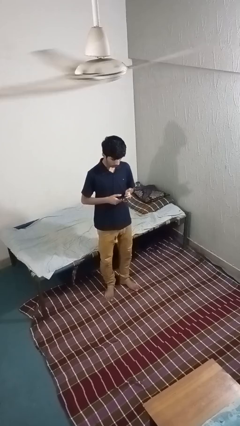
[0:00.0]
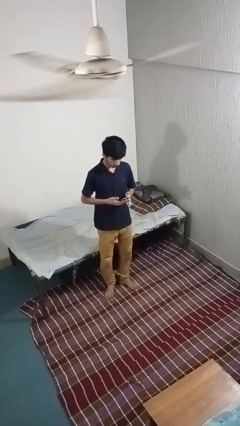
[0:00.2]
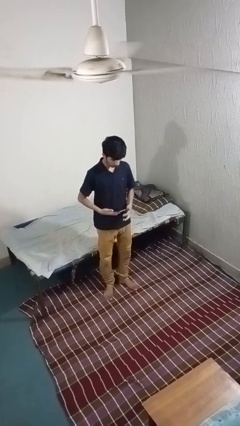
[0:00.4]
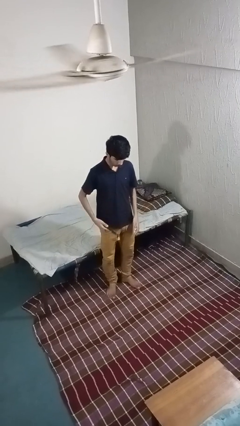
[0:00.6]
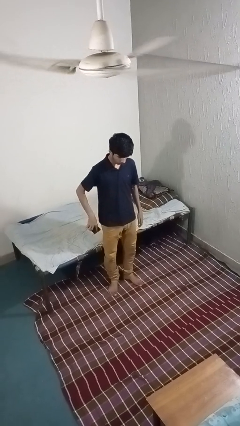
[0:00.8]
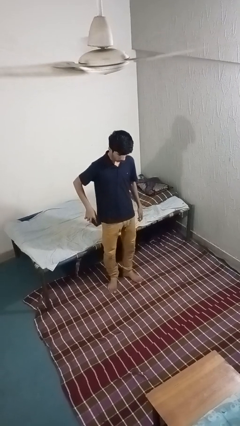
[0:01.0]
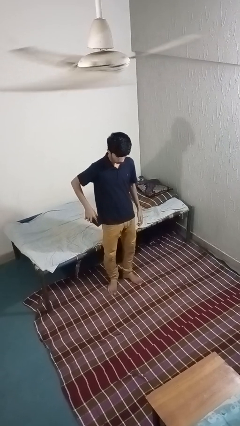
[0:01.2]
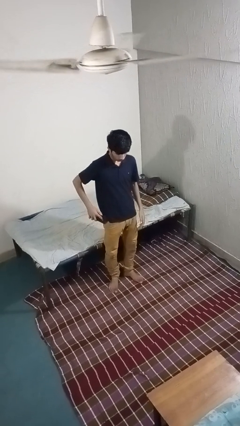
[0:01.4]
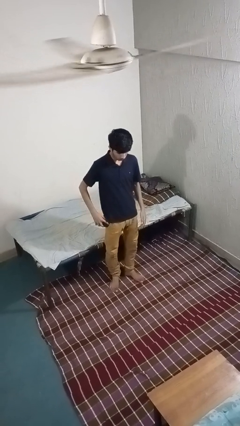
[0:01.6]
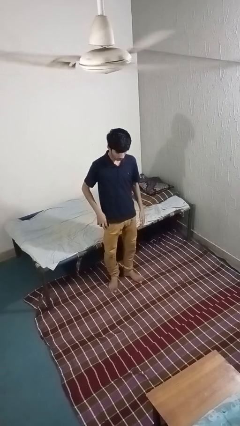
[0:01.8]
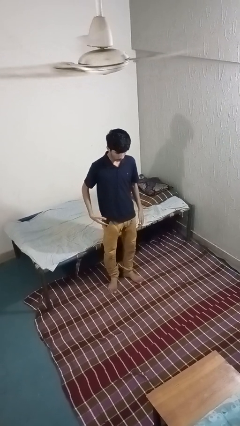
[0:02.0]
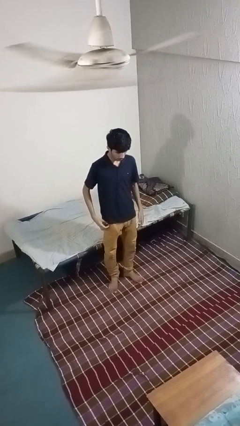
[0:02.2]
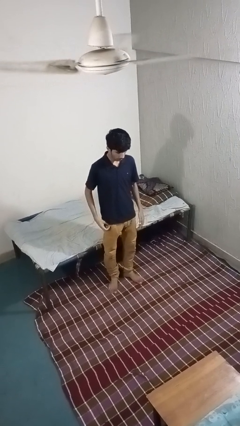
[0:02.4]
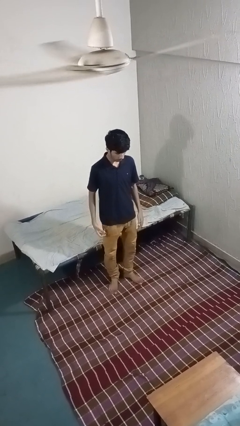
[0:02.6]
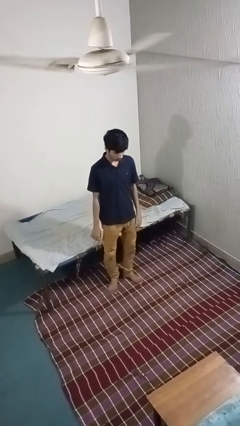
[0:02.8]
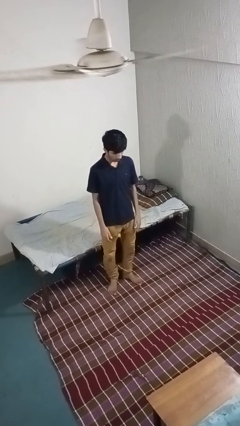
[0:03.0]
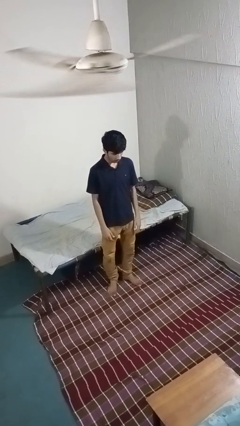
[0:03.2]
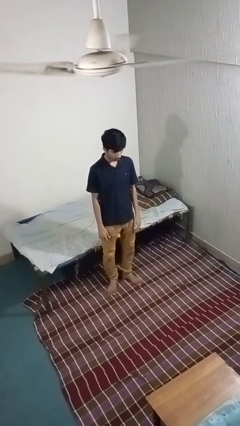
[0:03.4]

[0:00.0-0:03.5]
person puts phone into pocket

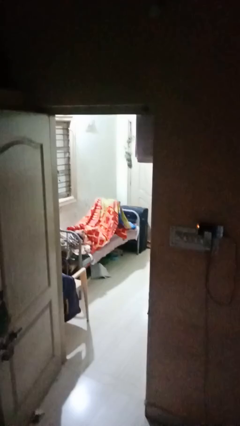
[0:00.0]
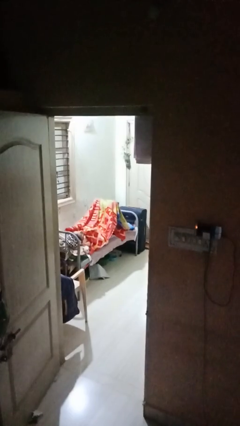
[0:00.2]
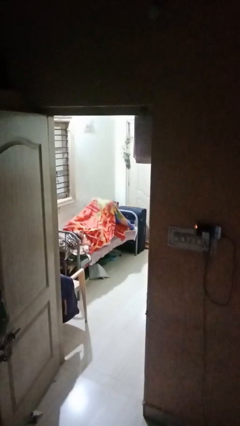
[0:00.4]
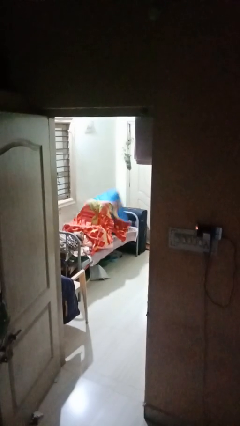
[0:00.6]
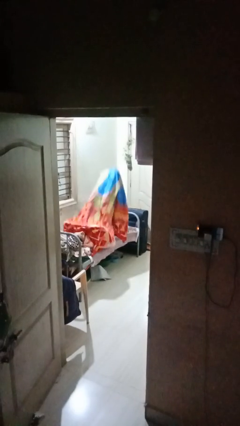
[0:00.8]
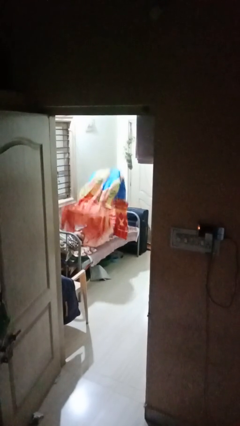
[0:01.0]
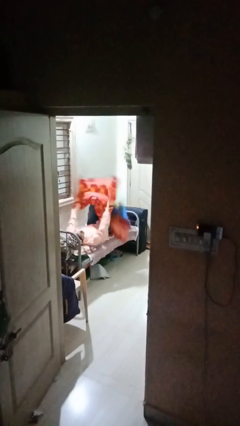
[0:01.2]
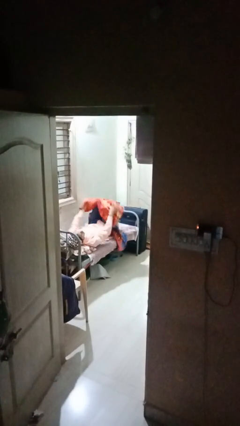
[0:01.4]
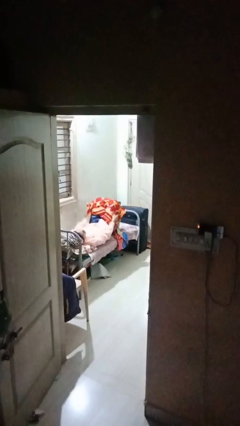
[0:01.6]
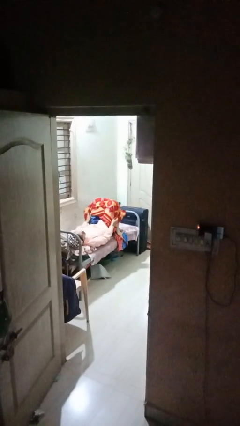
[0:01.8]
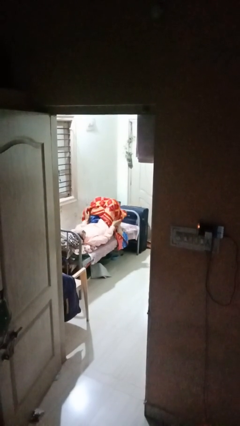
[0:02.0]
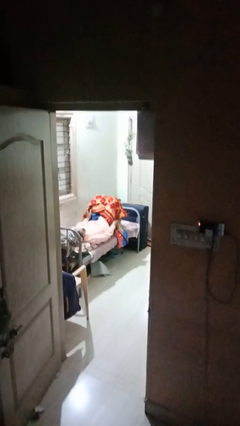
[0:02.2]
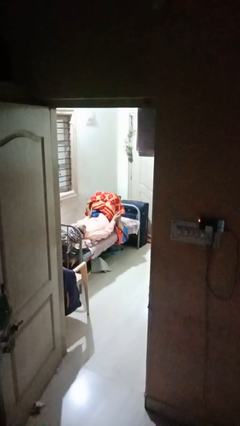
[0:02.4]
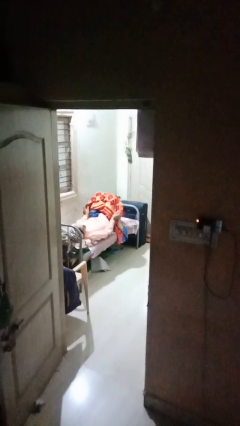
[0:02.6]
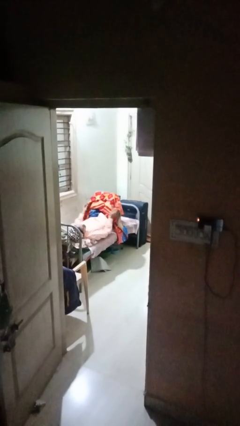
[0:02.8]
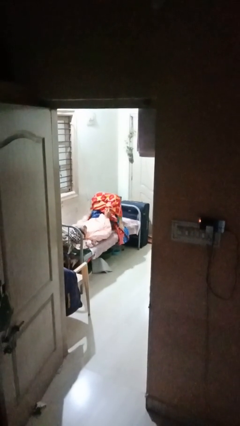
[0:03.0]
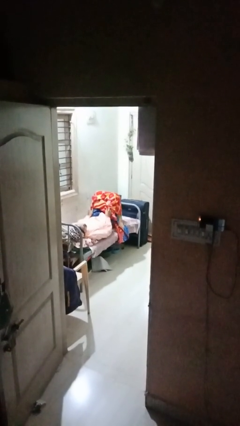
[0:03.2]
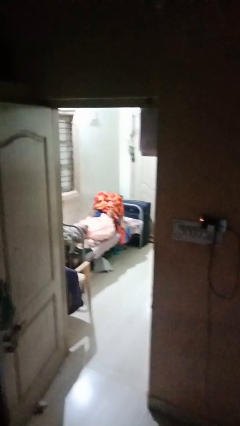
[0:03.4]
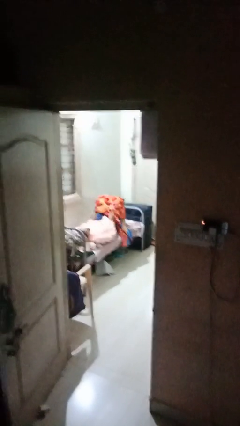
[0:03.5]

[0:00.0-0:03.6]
person uncovers with bedsheets

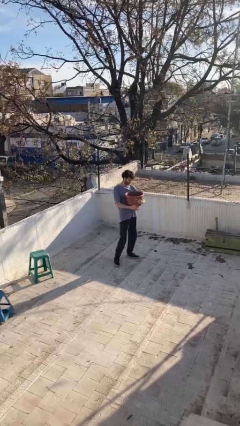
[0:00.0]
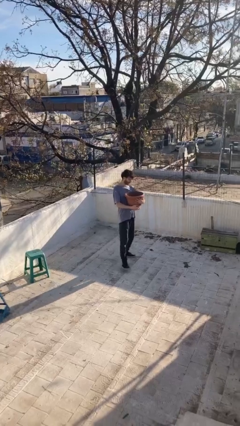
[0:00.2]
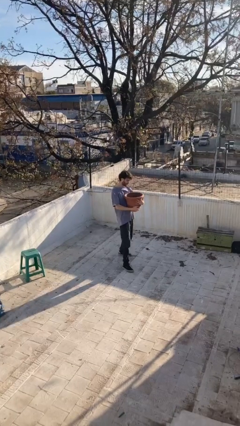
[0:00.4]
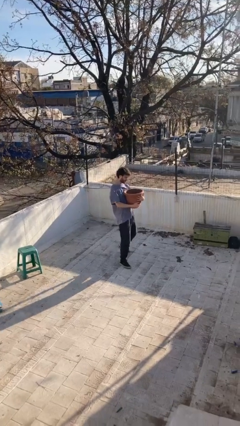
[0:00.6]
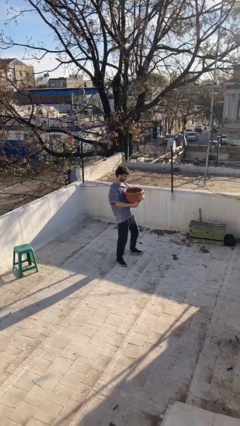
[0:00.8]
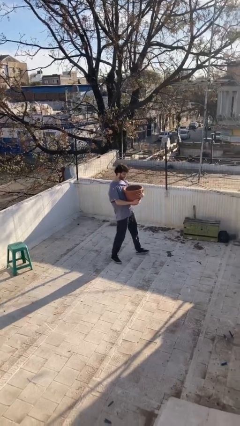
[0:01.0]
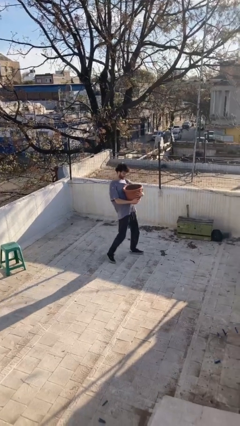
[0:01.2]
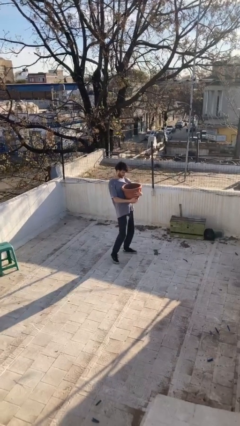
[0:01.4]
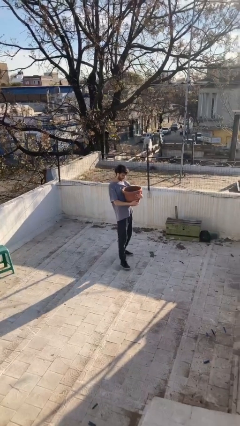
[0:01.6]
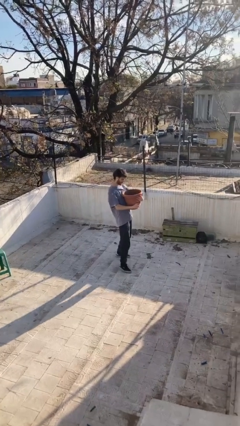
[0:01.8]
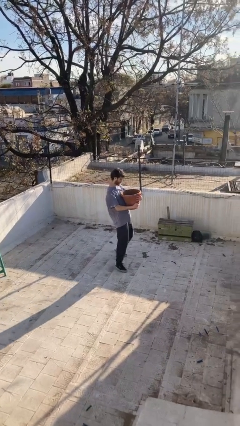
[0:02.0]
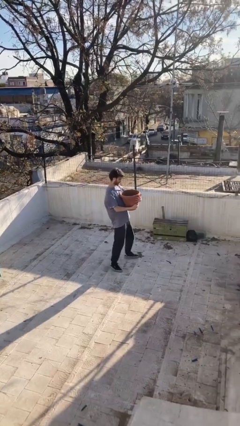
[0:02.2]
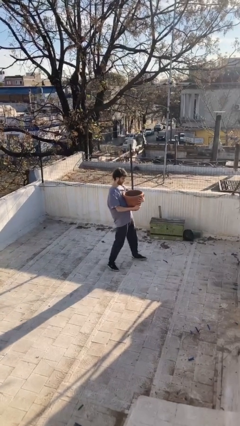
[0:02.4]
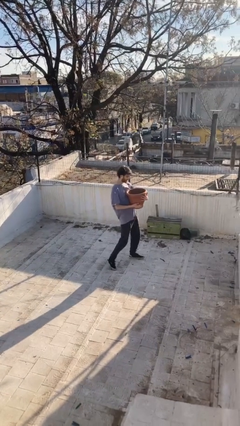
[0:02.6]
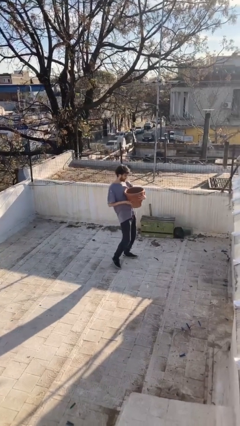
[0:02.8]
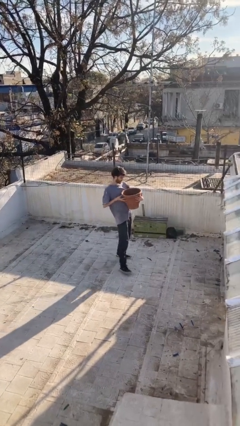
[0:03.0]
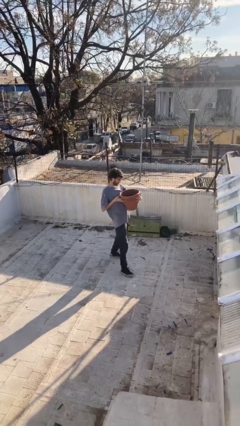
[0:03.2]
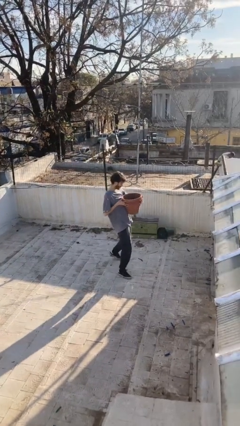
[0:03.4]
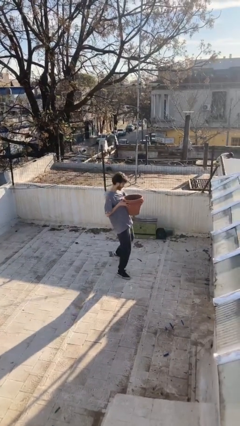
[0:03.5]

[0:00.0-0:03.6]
person carries heavy object

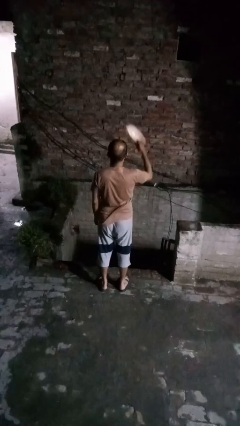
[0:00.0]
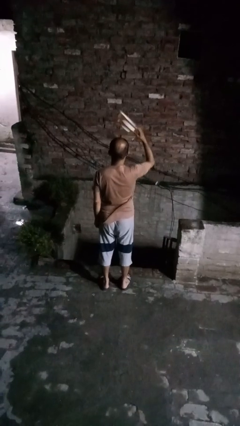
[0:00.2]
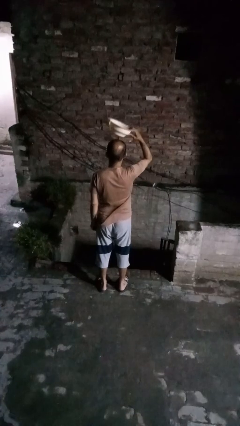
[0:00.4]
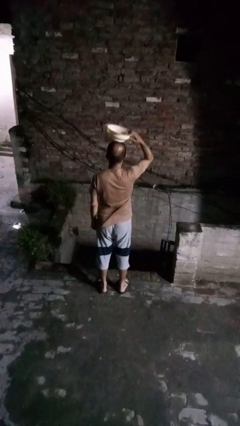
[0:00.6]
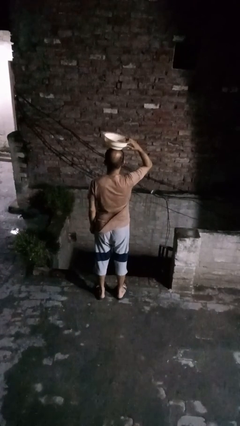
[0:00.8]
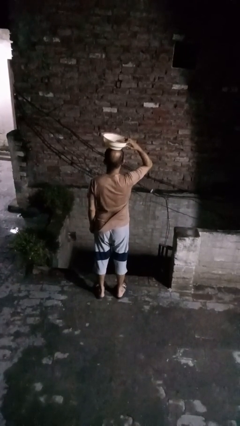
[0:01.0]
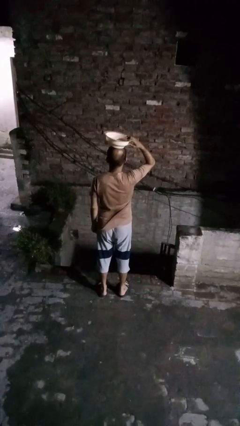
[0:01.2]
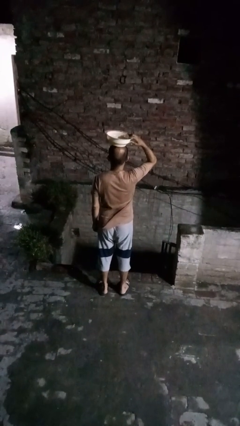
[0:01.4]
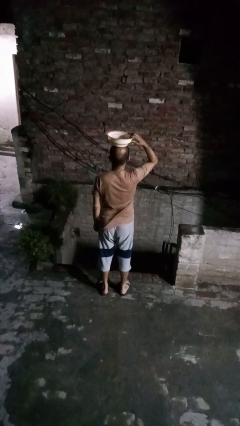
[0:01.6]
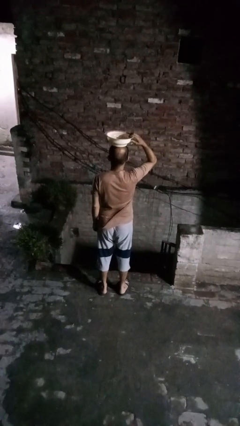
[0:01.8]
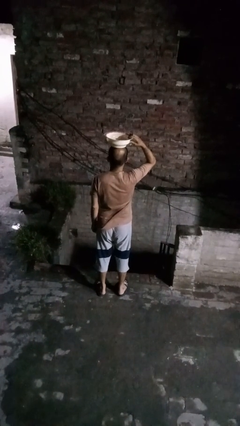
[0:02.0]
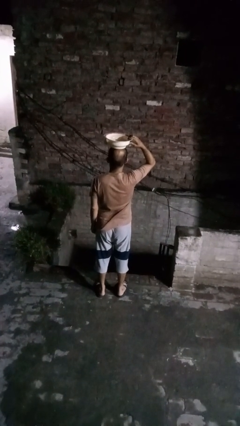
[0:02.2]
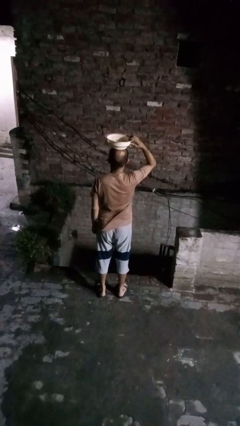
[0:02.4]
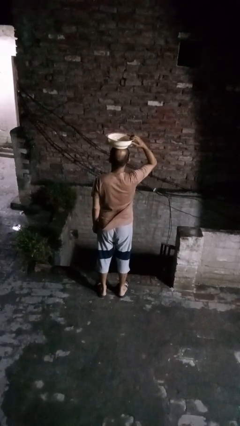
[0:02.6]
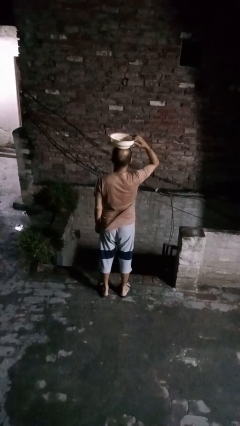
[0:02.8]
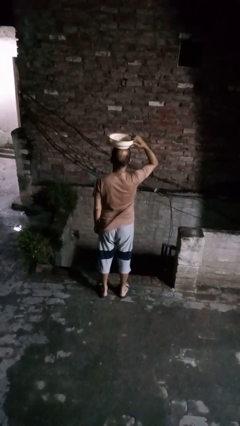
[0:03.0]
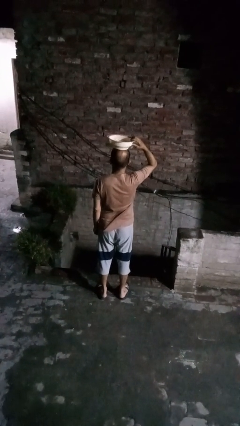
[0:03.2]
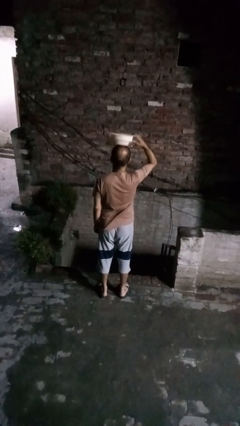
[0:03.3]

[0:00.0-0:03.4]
person holds object above head

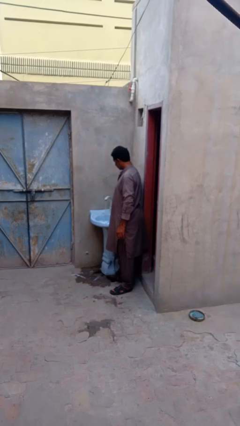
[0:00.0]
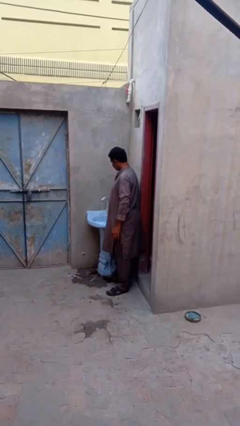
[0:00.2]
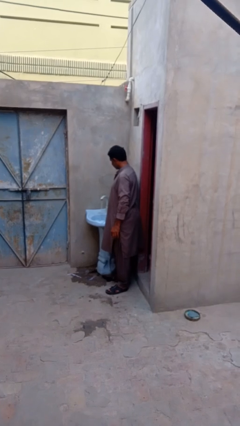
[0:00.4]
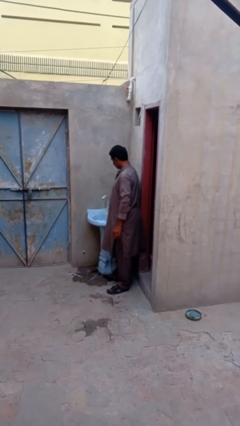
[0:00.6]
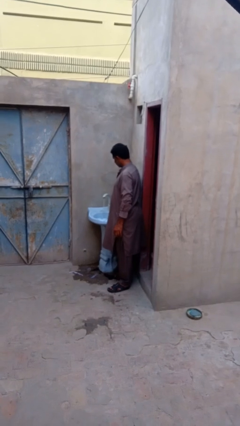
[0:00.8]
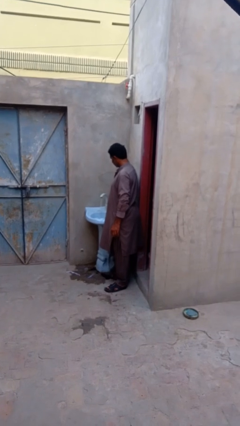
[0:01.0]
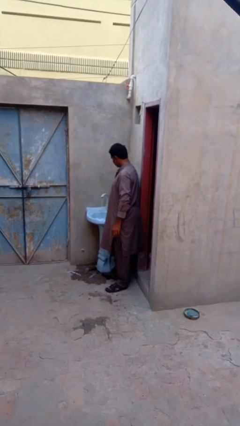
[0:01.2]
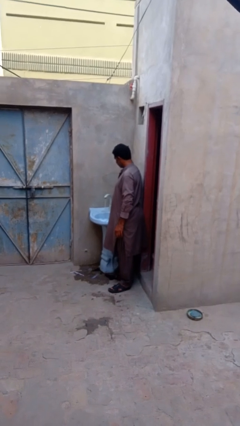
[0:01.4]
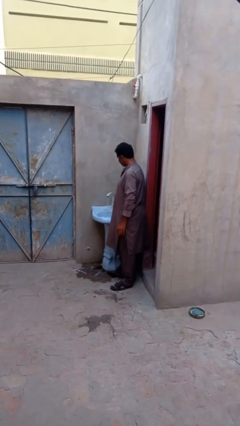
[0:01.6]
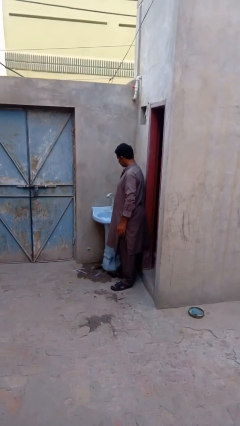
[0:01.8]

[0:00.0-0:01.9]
person turns on faucet

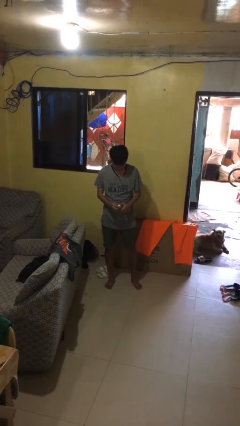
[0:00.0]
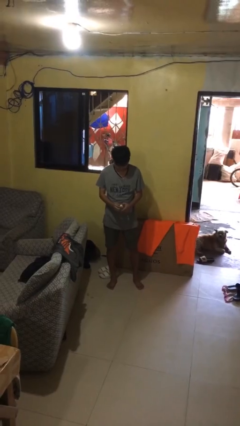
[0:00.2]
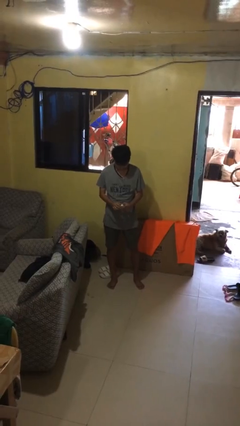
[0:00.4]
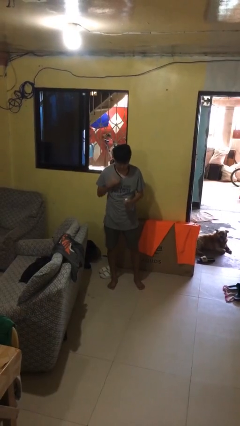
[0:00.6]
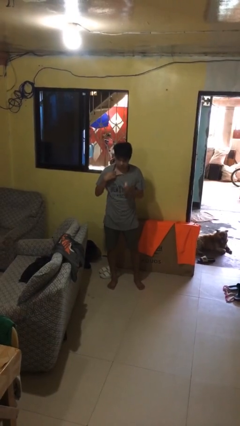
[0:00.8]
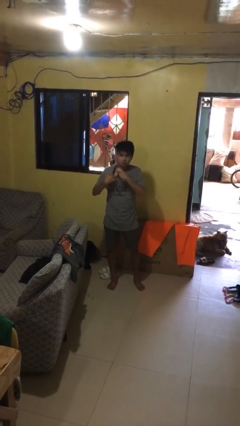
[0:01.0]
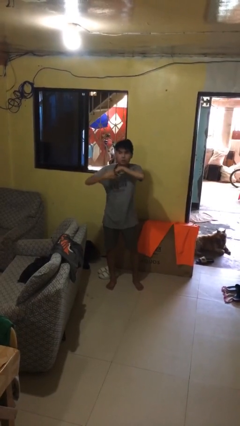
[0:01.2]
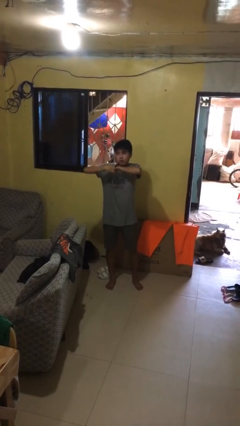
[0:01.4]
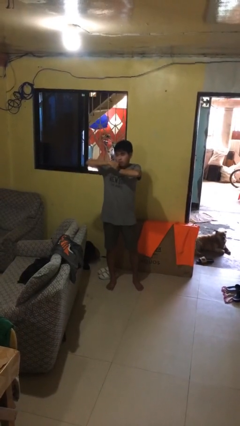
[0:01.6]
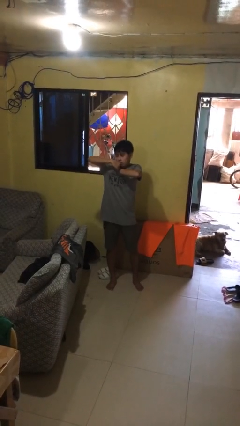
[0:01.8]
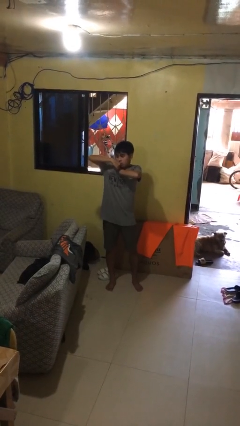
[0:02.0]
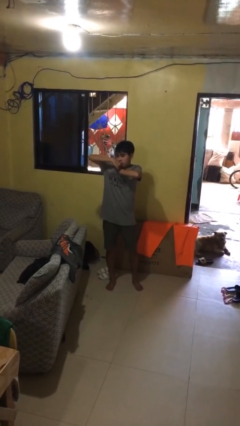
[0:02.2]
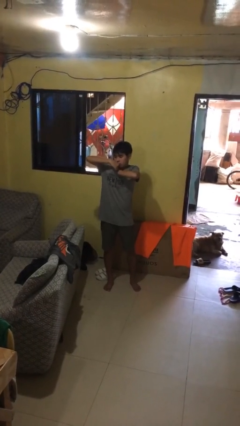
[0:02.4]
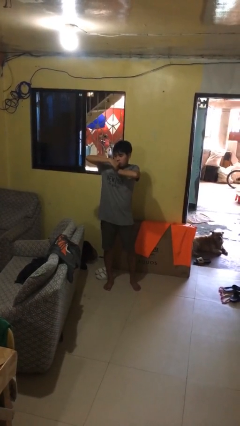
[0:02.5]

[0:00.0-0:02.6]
person applies deodorant
